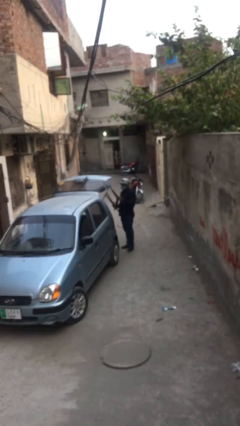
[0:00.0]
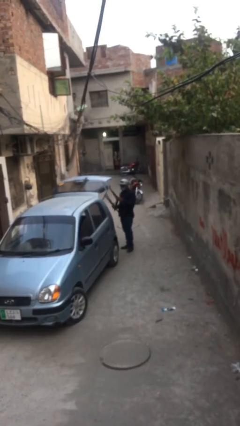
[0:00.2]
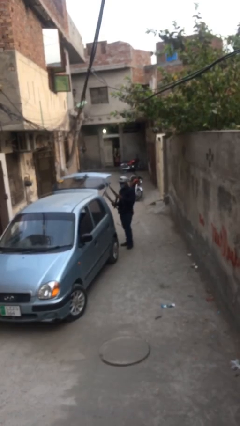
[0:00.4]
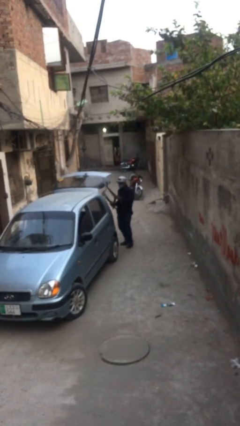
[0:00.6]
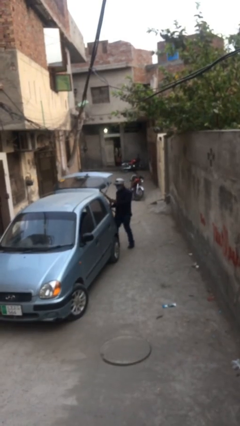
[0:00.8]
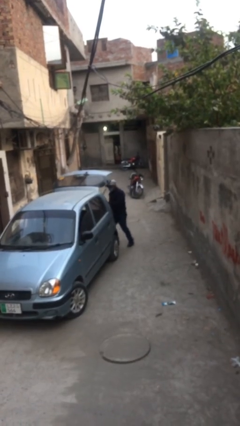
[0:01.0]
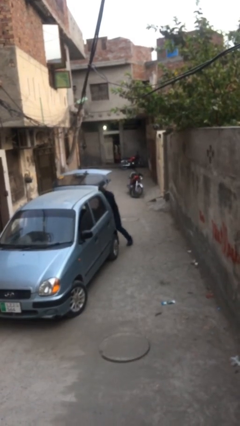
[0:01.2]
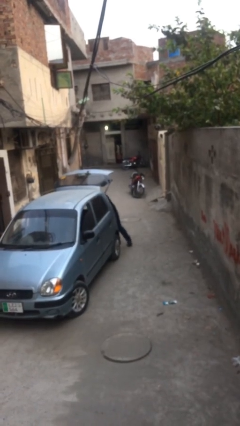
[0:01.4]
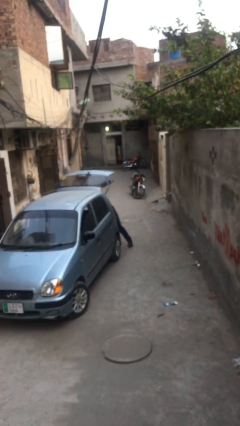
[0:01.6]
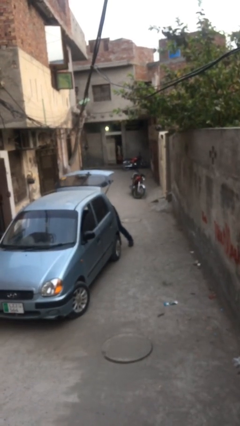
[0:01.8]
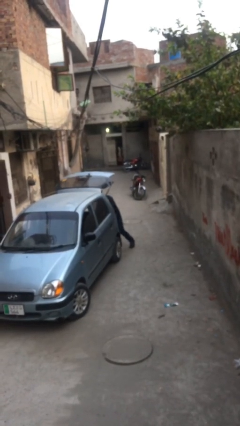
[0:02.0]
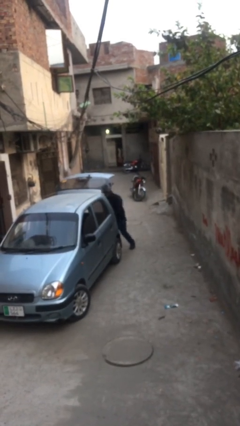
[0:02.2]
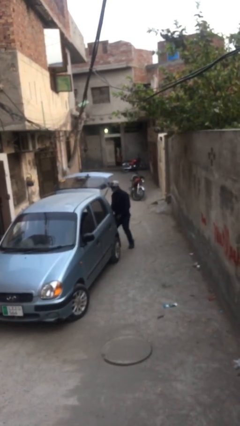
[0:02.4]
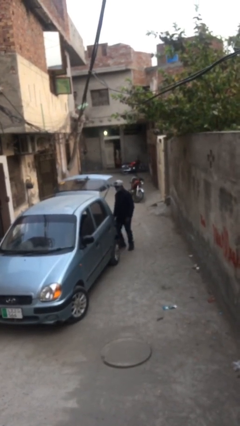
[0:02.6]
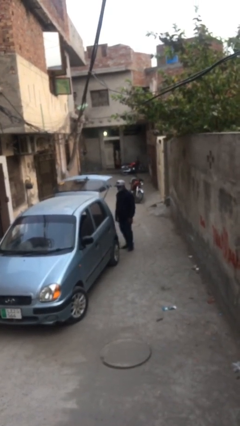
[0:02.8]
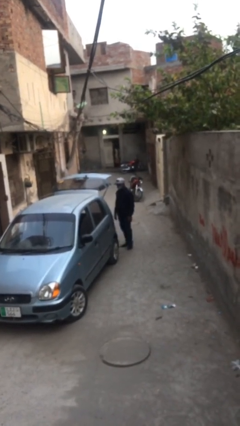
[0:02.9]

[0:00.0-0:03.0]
person loads car

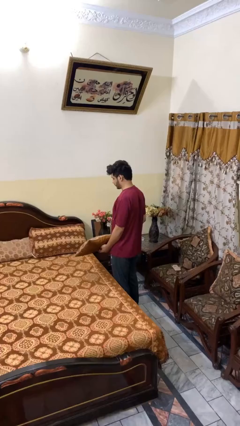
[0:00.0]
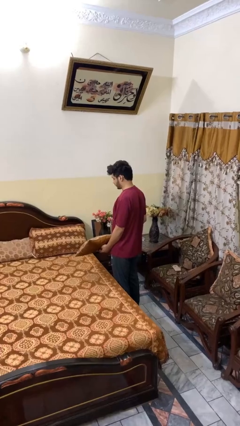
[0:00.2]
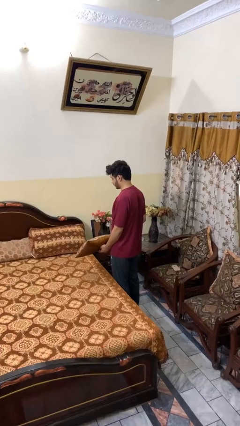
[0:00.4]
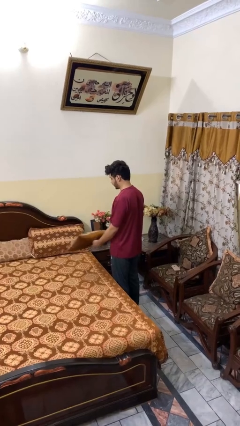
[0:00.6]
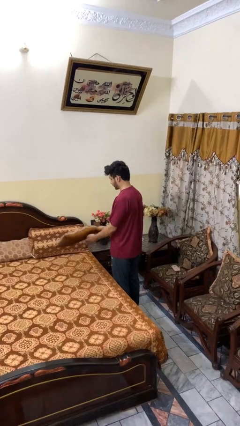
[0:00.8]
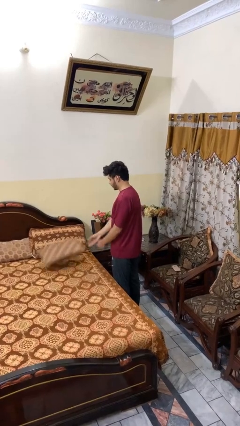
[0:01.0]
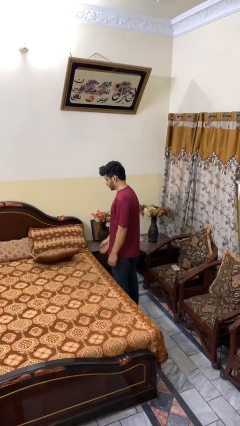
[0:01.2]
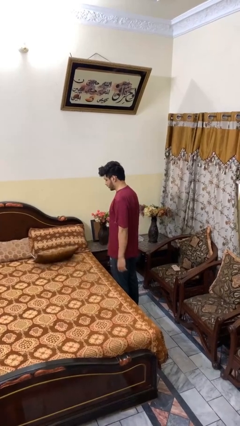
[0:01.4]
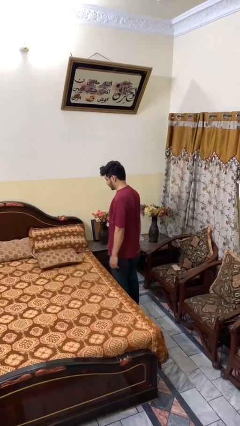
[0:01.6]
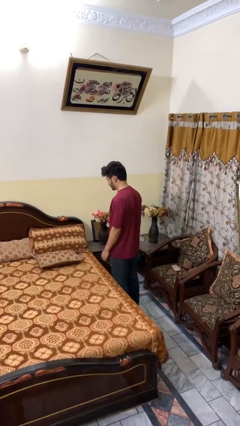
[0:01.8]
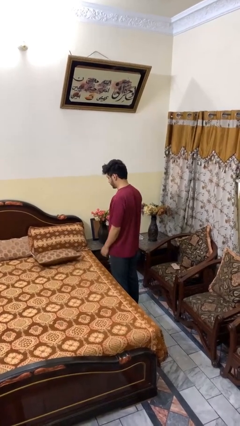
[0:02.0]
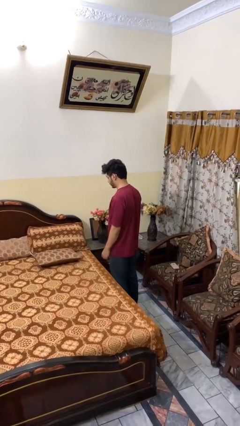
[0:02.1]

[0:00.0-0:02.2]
person puts down object on bed

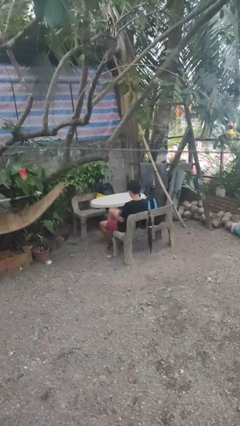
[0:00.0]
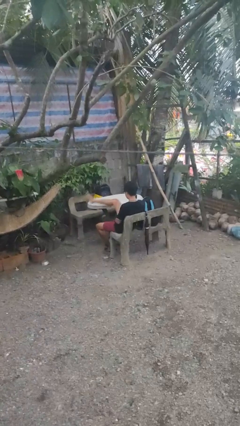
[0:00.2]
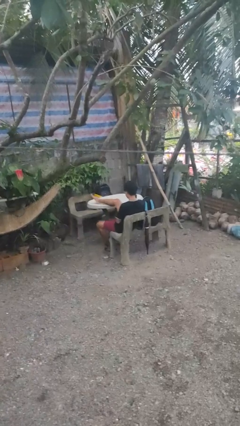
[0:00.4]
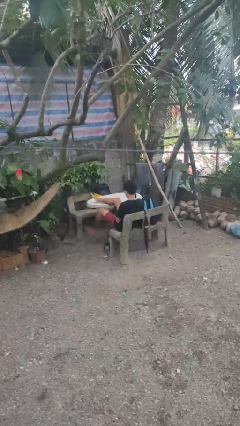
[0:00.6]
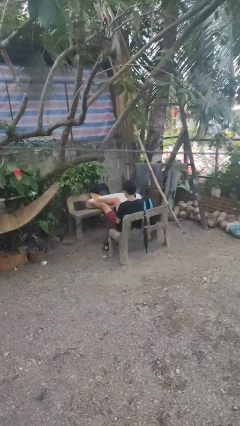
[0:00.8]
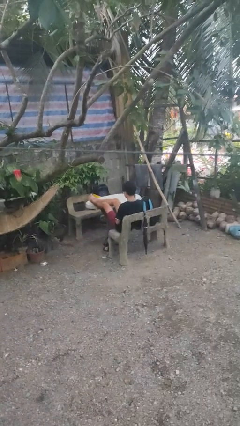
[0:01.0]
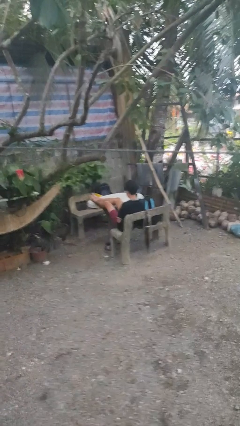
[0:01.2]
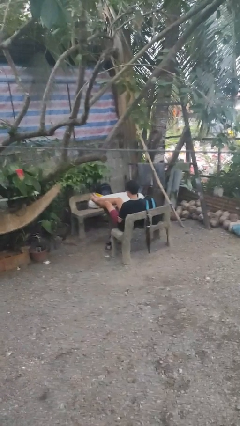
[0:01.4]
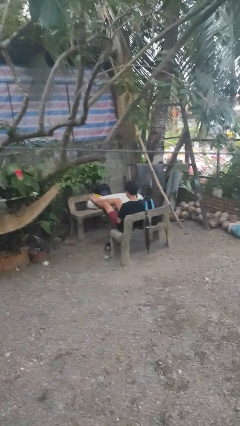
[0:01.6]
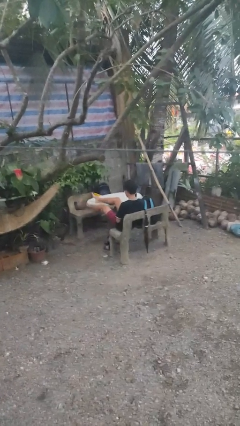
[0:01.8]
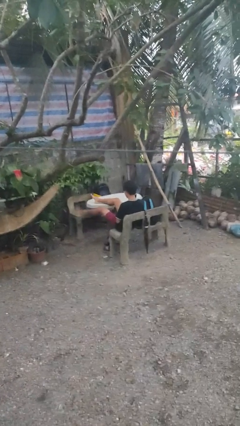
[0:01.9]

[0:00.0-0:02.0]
person puts feet up

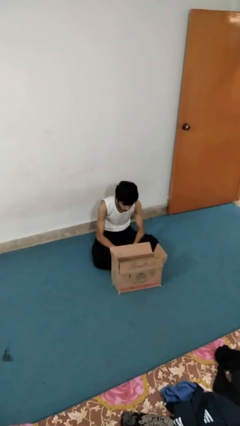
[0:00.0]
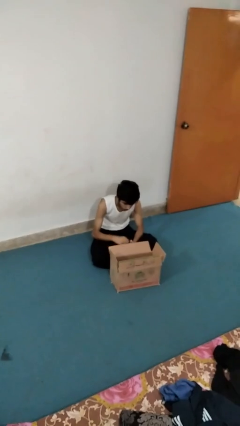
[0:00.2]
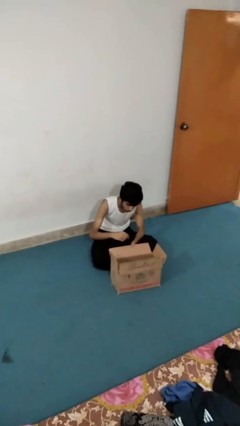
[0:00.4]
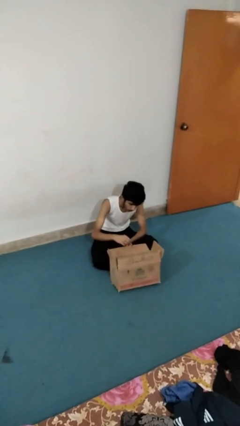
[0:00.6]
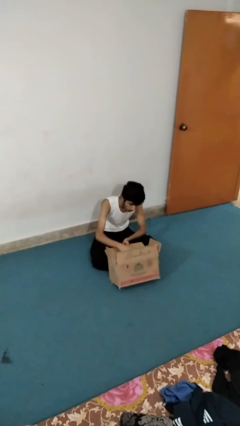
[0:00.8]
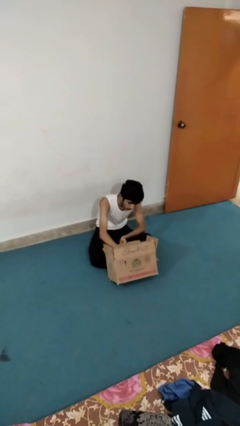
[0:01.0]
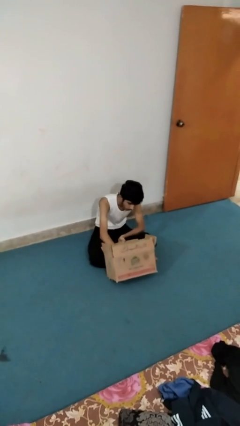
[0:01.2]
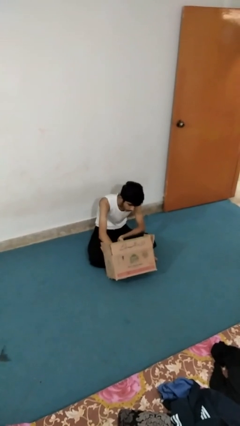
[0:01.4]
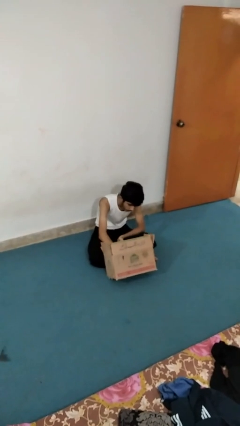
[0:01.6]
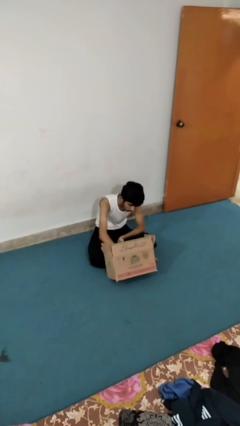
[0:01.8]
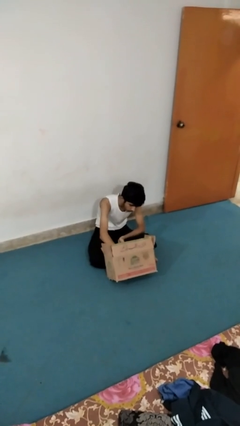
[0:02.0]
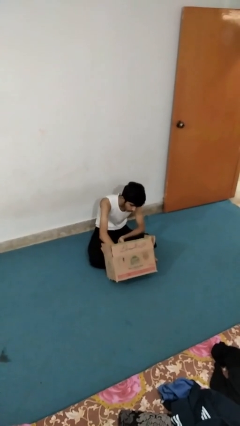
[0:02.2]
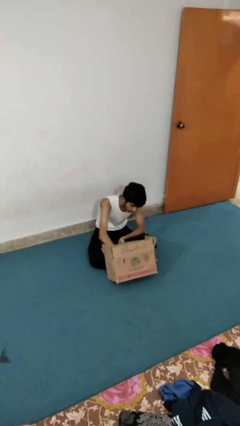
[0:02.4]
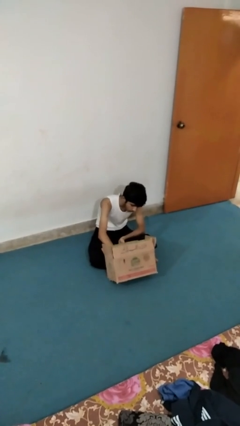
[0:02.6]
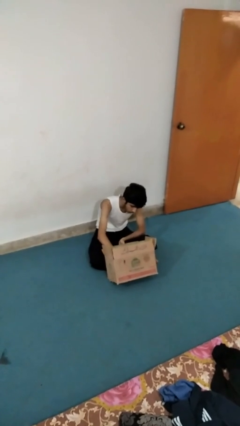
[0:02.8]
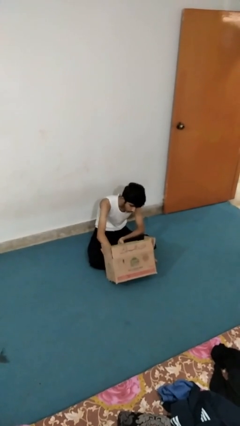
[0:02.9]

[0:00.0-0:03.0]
person searches in box

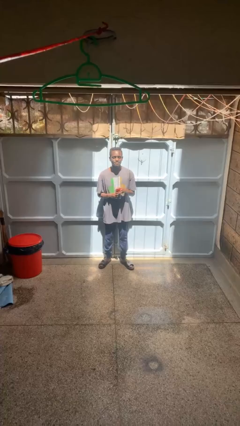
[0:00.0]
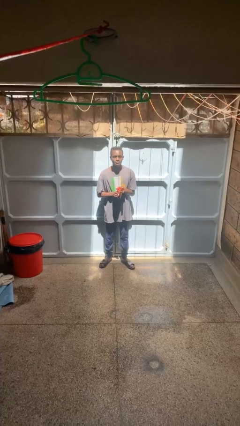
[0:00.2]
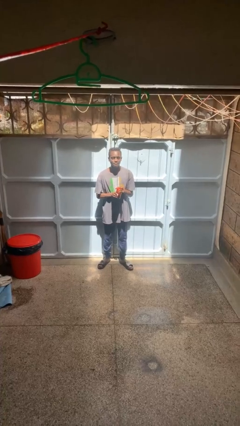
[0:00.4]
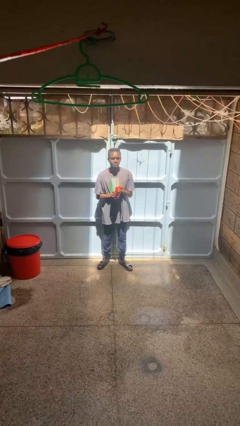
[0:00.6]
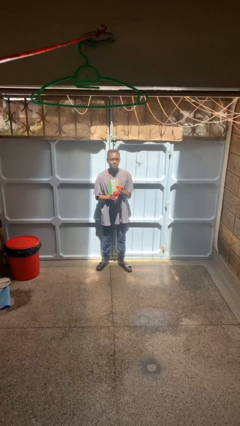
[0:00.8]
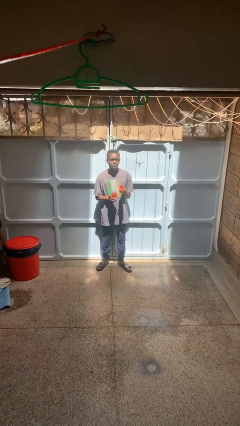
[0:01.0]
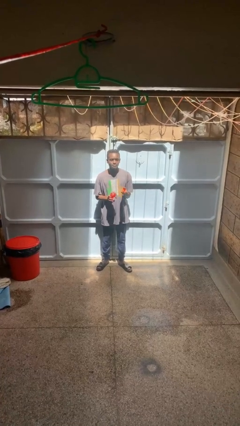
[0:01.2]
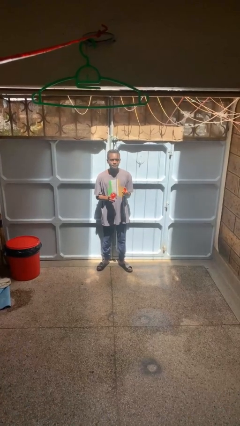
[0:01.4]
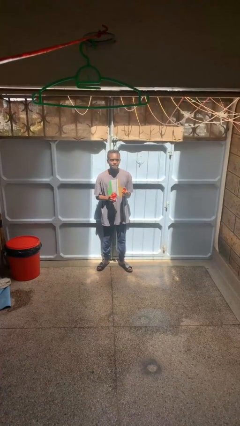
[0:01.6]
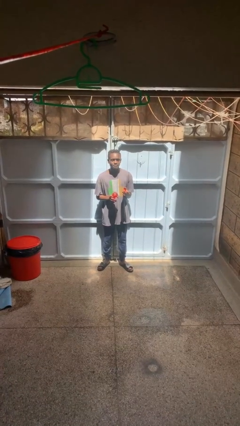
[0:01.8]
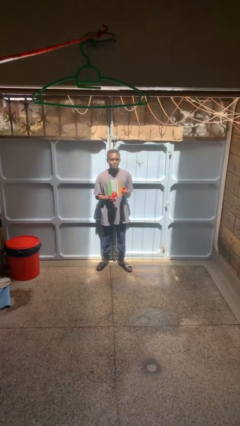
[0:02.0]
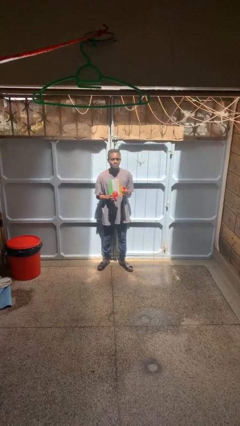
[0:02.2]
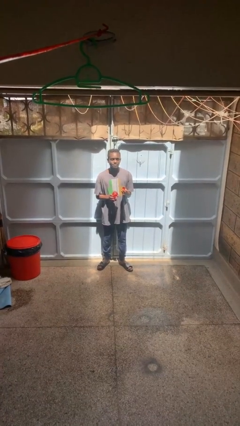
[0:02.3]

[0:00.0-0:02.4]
person opens jar

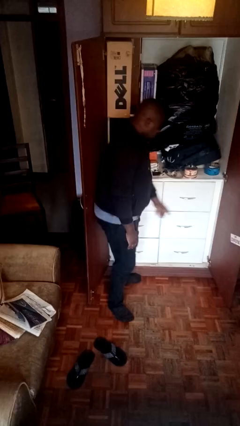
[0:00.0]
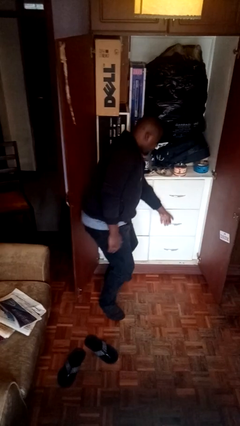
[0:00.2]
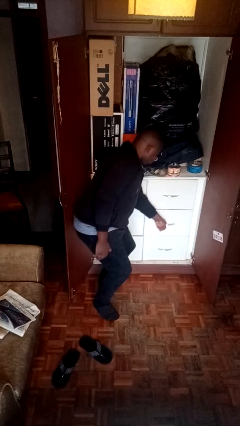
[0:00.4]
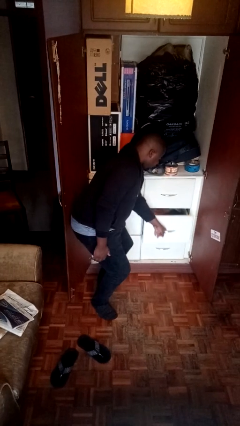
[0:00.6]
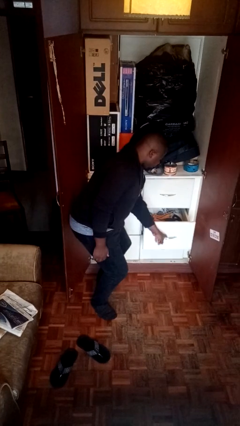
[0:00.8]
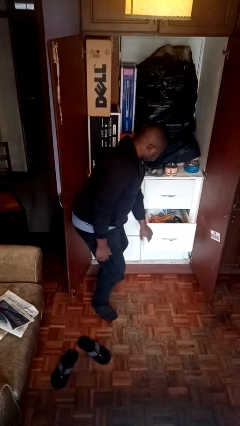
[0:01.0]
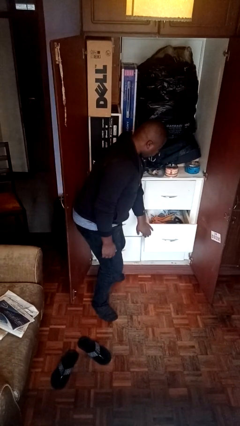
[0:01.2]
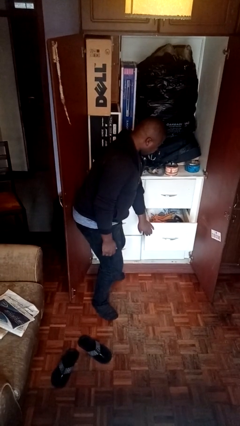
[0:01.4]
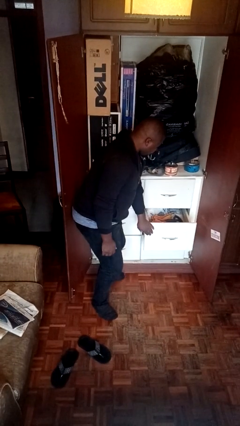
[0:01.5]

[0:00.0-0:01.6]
person opens dresser drawer

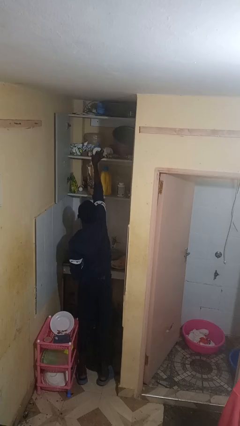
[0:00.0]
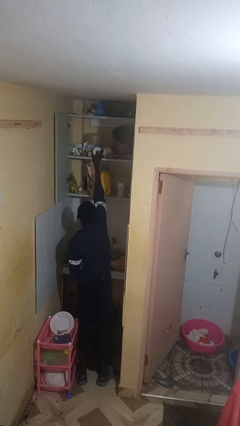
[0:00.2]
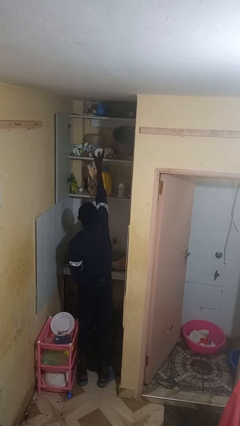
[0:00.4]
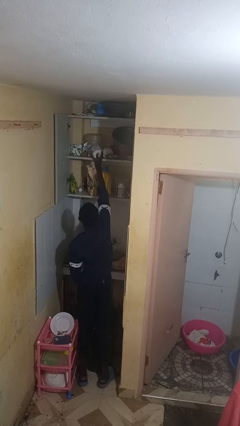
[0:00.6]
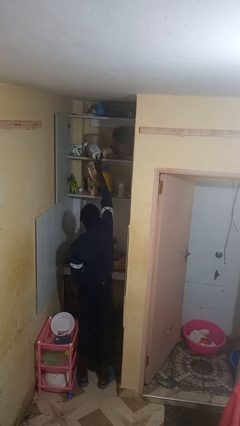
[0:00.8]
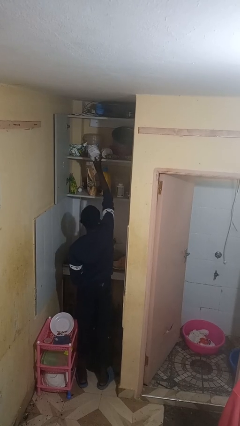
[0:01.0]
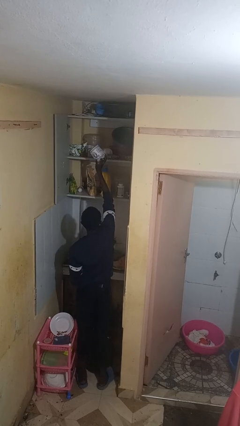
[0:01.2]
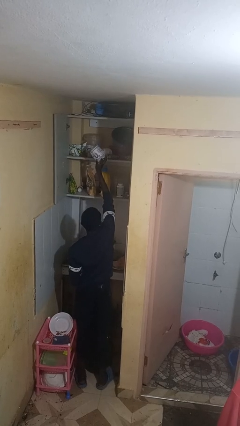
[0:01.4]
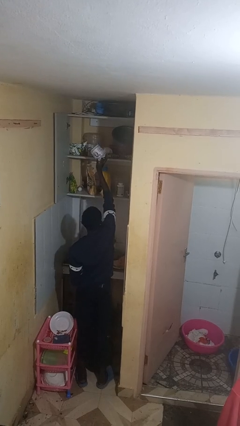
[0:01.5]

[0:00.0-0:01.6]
person takes object from cabinet

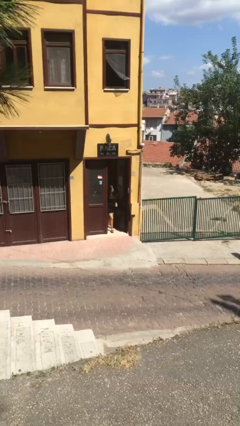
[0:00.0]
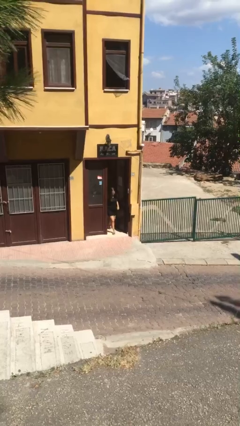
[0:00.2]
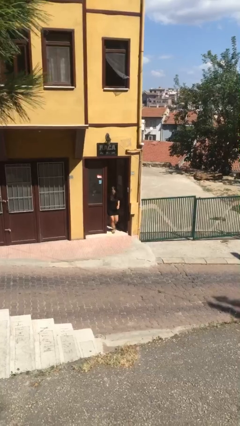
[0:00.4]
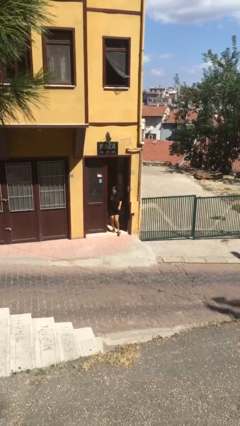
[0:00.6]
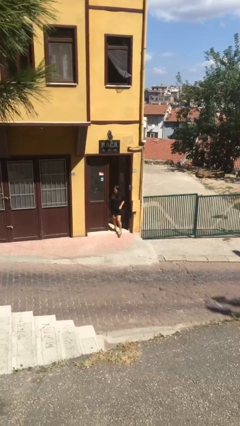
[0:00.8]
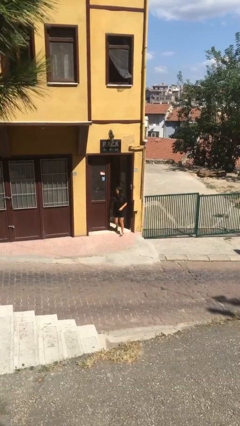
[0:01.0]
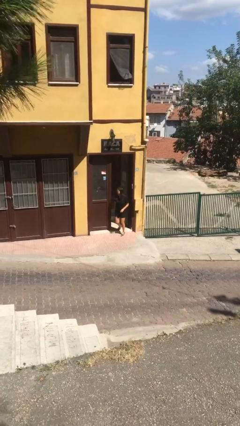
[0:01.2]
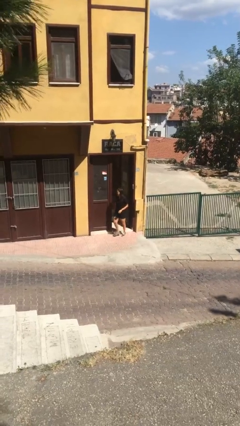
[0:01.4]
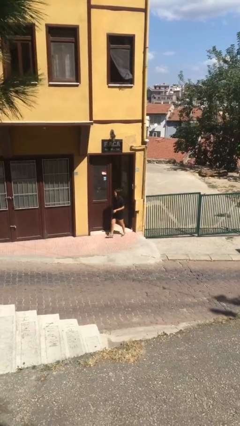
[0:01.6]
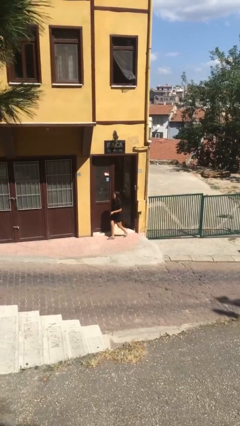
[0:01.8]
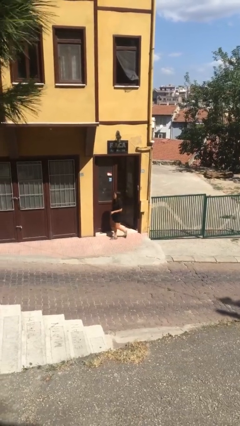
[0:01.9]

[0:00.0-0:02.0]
person enters scene through structure
